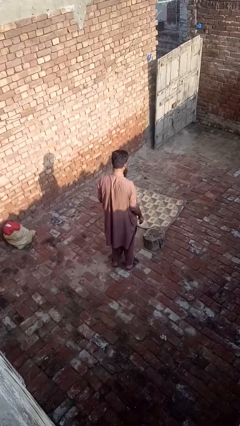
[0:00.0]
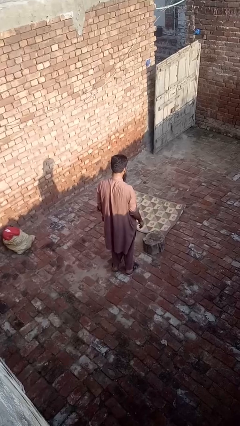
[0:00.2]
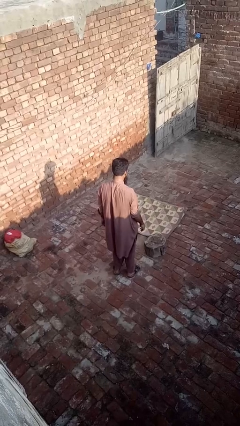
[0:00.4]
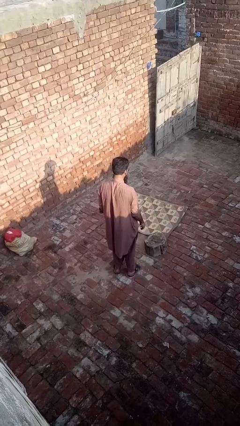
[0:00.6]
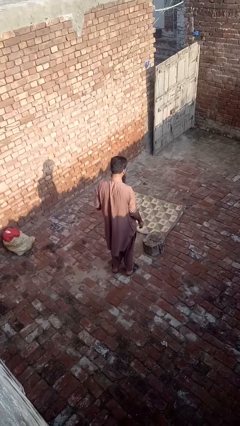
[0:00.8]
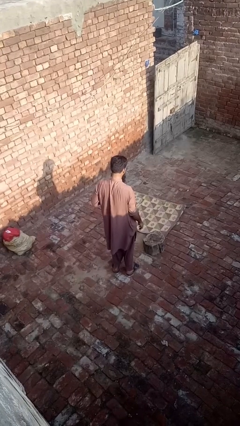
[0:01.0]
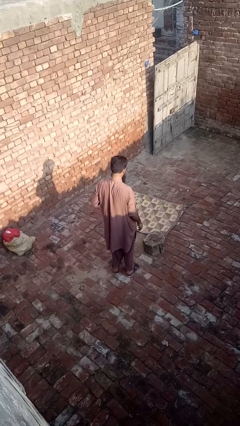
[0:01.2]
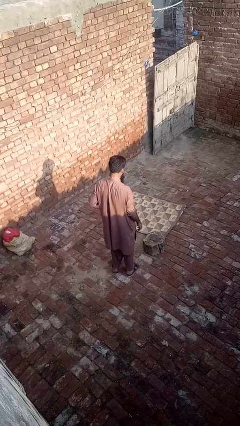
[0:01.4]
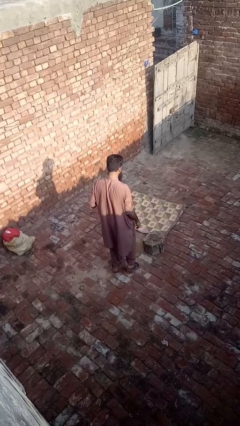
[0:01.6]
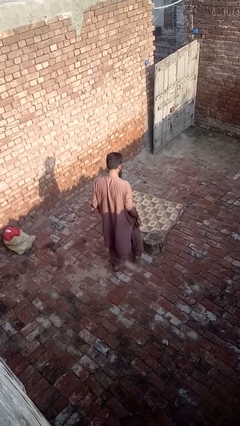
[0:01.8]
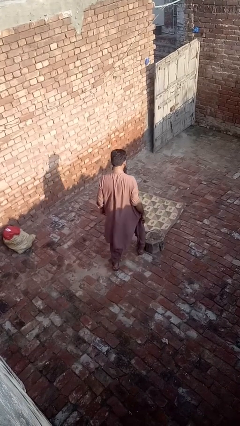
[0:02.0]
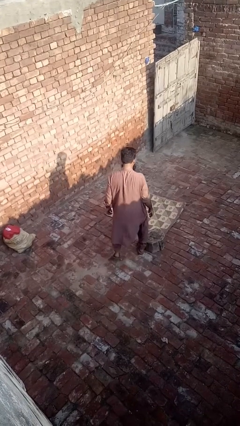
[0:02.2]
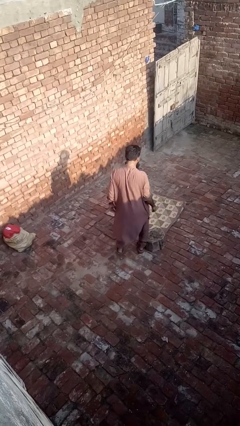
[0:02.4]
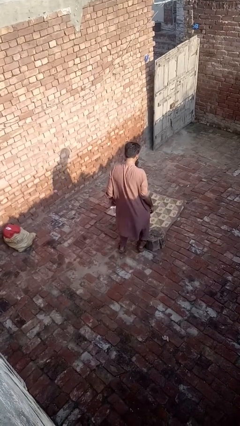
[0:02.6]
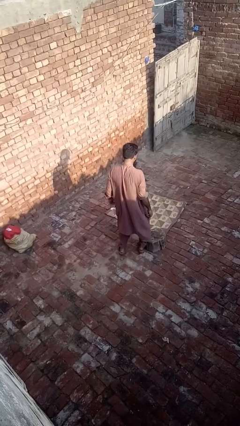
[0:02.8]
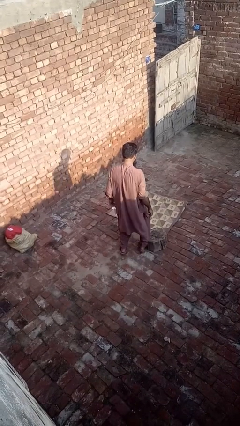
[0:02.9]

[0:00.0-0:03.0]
person trips on object on floor

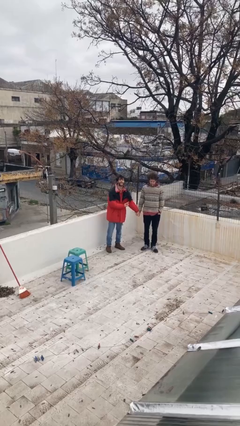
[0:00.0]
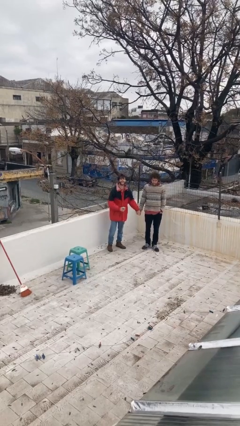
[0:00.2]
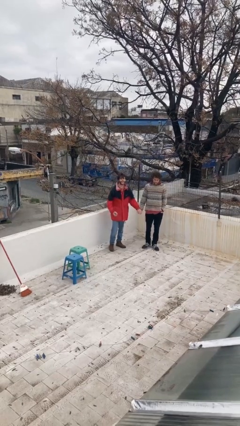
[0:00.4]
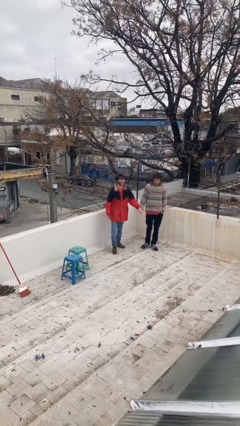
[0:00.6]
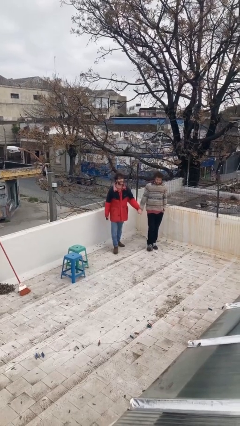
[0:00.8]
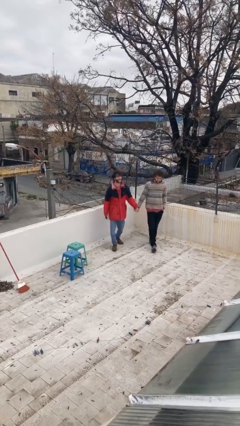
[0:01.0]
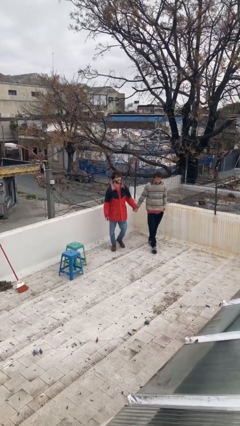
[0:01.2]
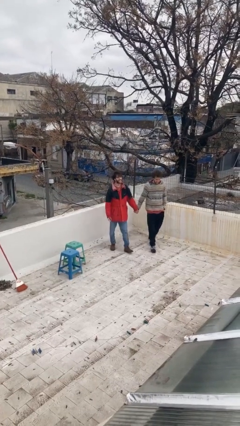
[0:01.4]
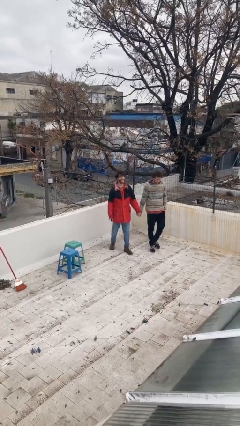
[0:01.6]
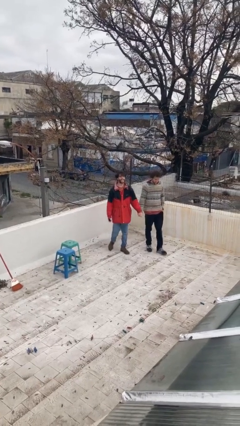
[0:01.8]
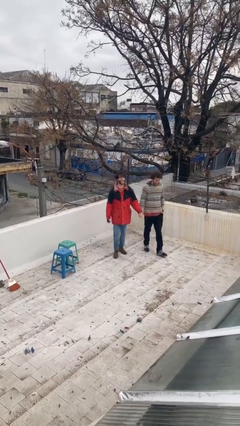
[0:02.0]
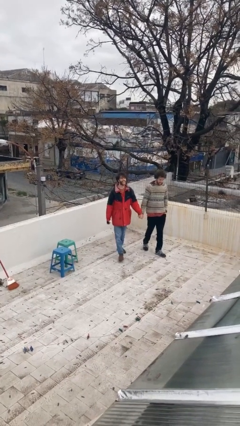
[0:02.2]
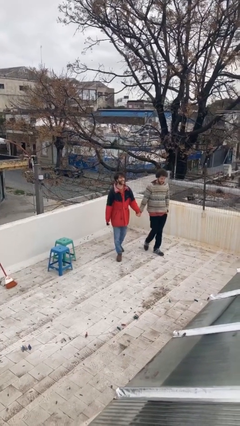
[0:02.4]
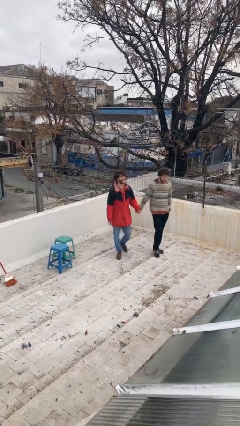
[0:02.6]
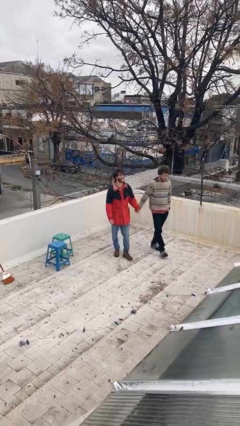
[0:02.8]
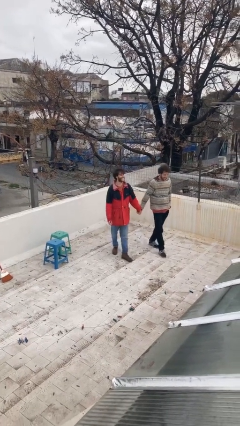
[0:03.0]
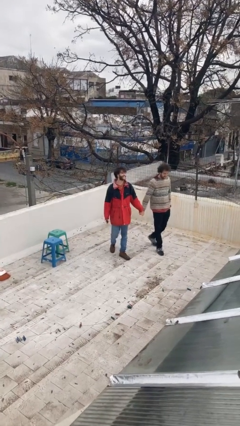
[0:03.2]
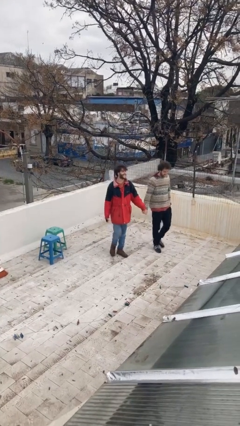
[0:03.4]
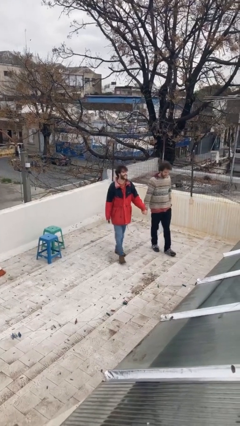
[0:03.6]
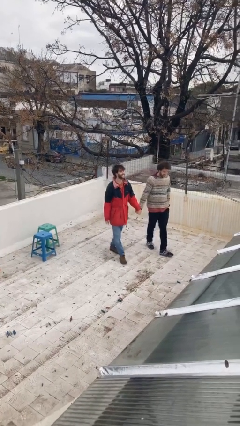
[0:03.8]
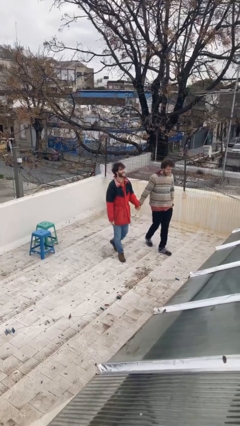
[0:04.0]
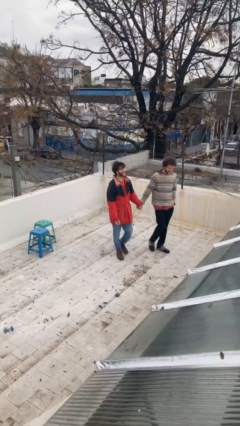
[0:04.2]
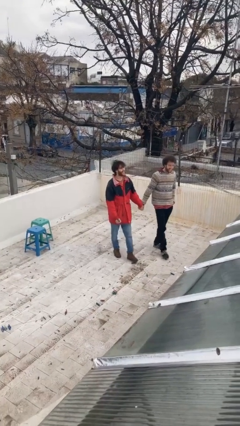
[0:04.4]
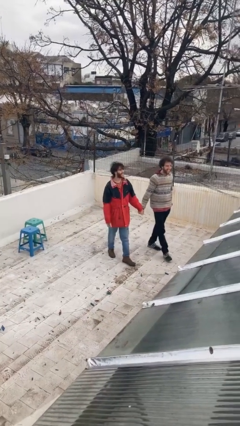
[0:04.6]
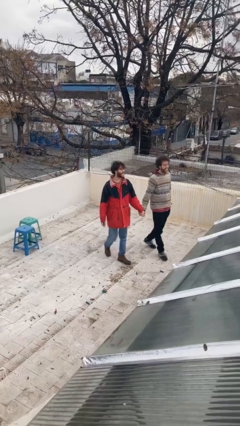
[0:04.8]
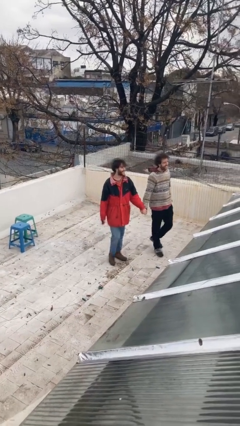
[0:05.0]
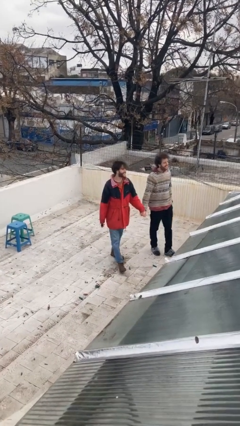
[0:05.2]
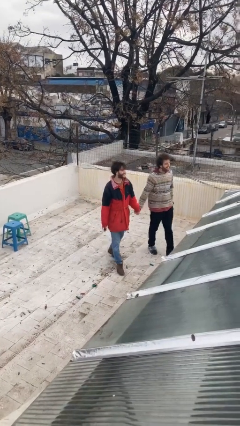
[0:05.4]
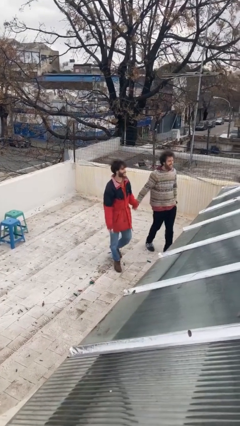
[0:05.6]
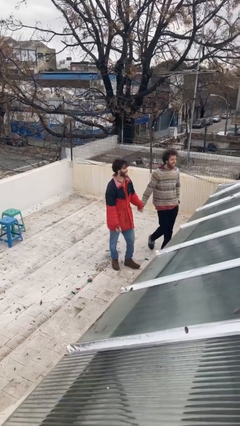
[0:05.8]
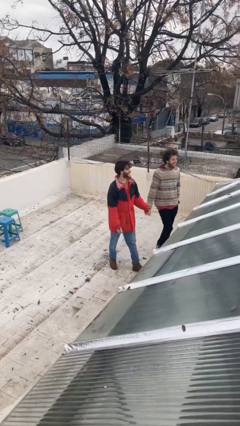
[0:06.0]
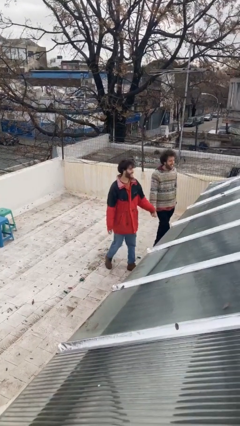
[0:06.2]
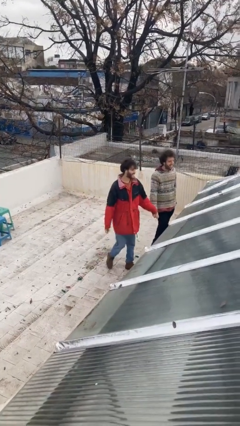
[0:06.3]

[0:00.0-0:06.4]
person holds hand

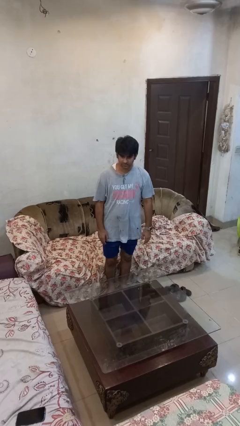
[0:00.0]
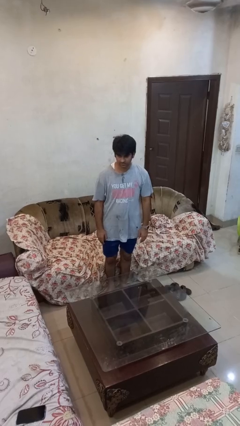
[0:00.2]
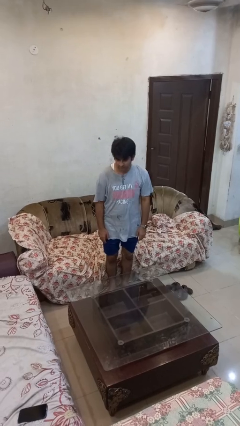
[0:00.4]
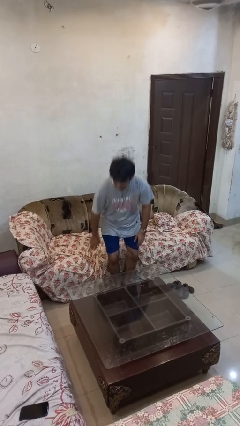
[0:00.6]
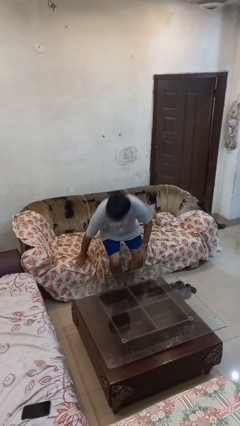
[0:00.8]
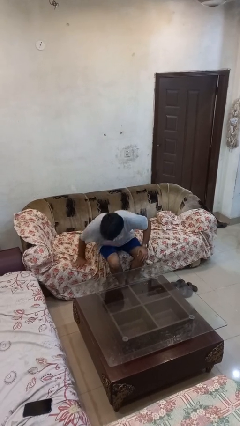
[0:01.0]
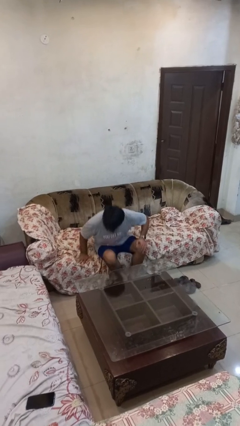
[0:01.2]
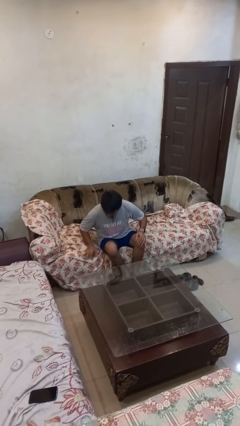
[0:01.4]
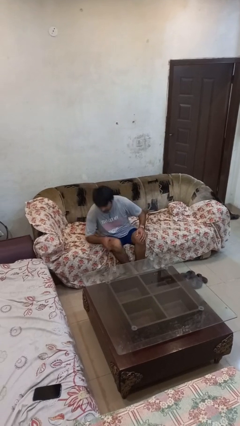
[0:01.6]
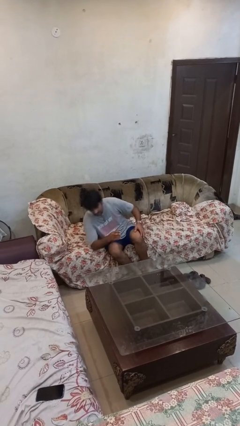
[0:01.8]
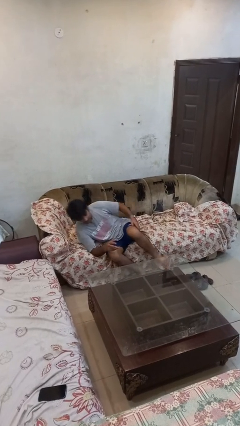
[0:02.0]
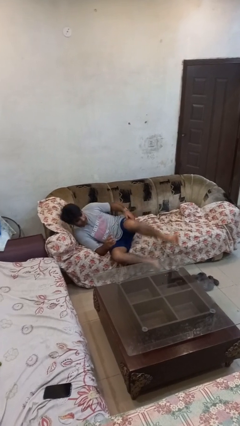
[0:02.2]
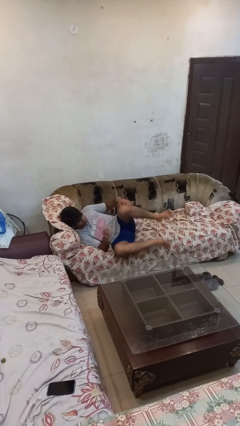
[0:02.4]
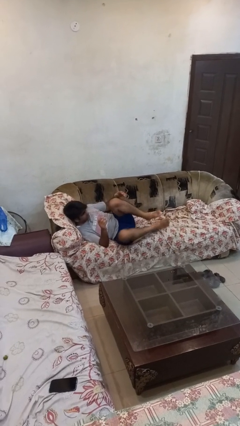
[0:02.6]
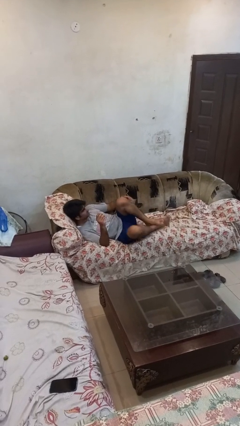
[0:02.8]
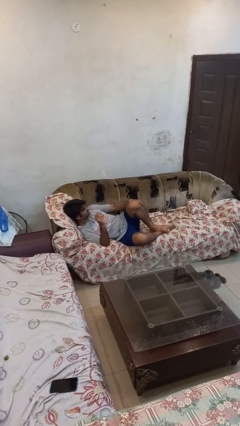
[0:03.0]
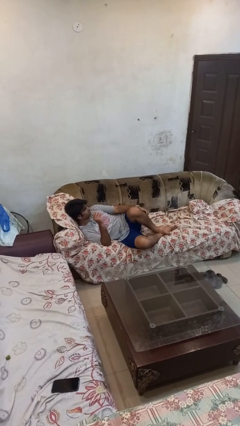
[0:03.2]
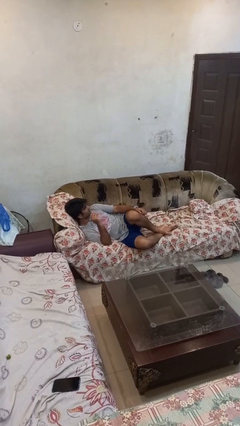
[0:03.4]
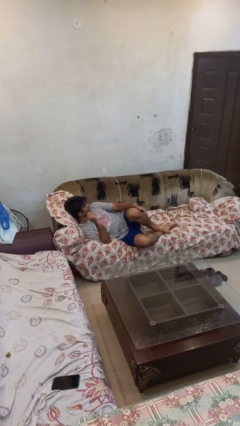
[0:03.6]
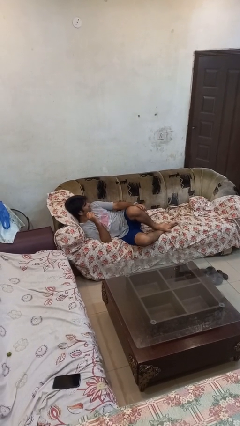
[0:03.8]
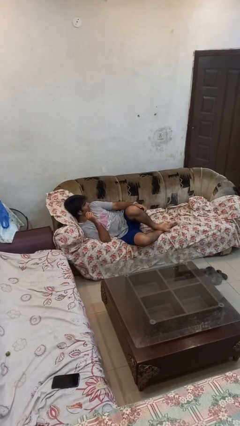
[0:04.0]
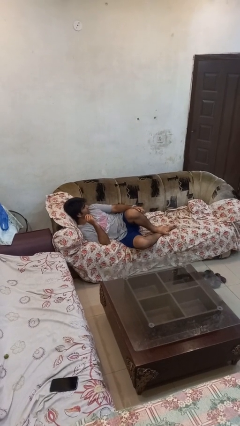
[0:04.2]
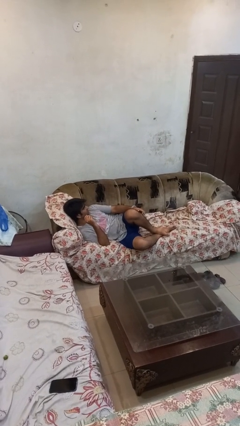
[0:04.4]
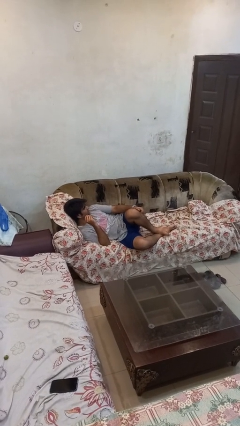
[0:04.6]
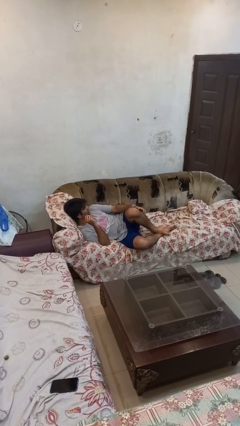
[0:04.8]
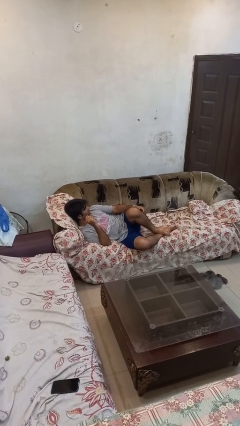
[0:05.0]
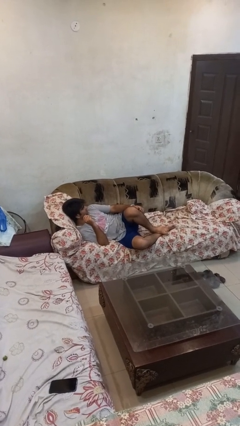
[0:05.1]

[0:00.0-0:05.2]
person lies down on couch

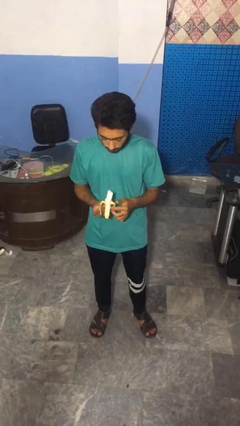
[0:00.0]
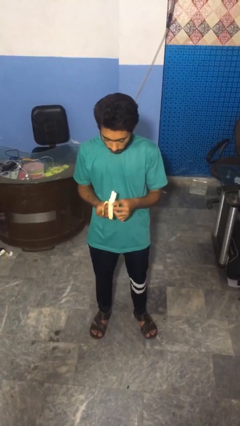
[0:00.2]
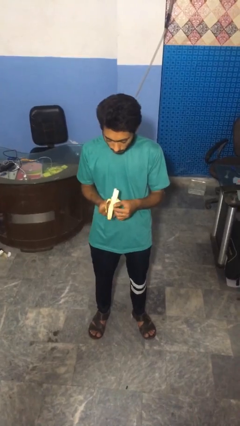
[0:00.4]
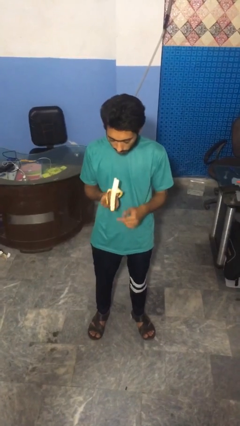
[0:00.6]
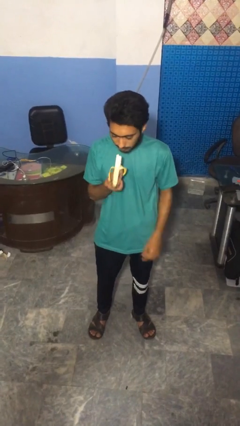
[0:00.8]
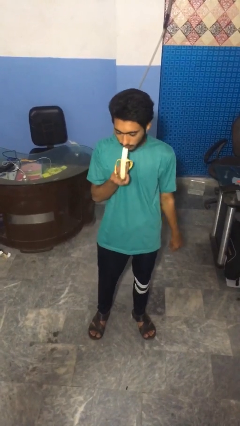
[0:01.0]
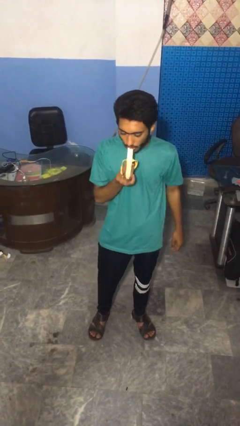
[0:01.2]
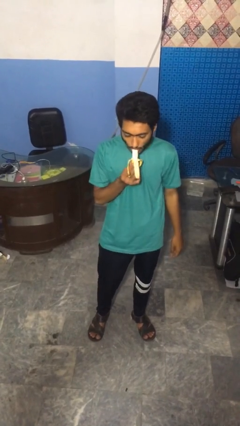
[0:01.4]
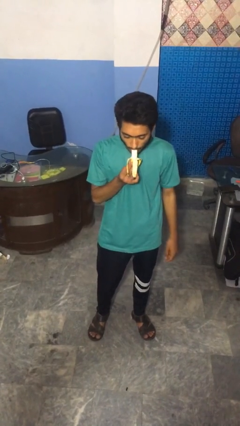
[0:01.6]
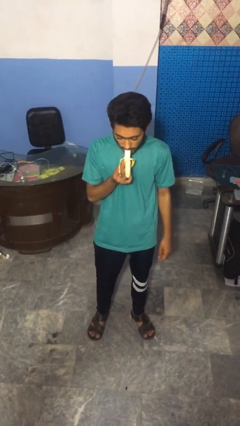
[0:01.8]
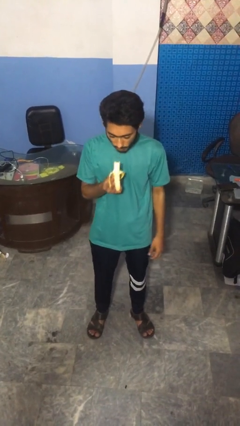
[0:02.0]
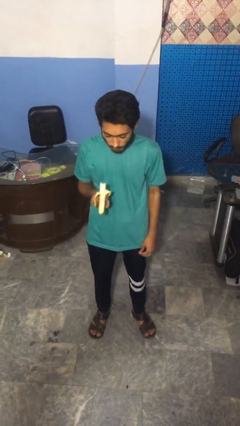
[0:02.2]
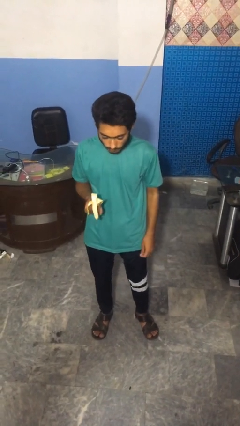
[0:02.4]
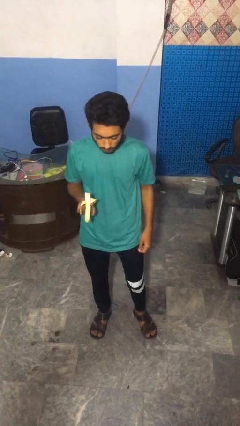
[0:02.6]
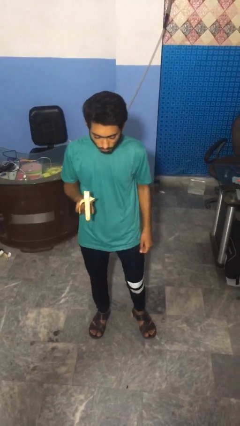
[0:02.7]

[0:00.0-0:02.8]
person eats banana
